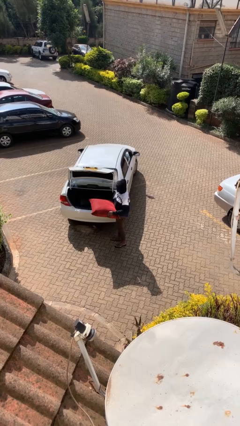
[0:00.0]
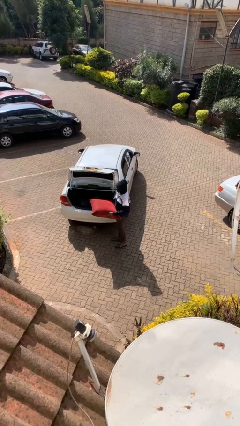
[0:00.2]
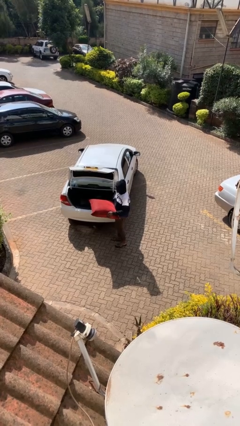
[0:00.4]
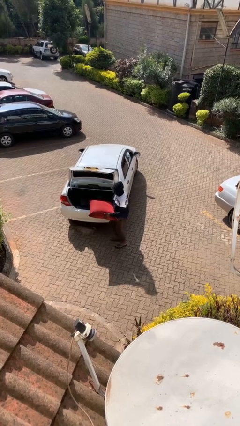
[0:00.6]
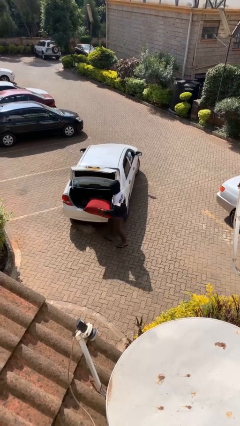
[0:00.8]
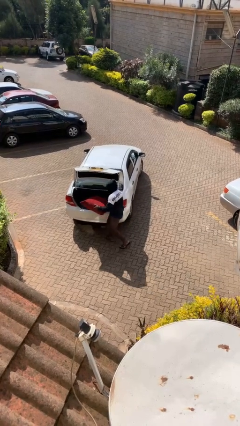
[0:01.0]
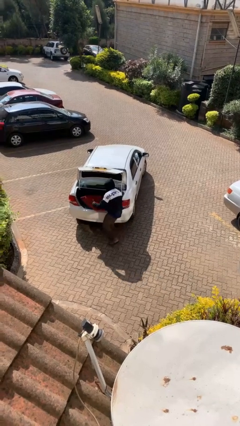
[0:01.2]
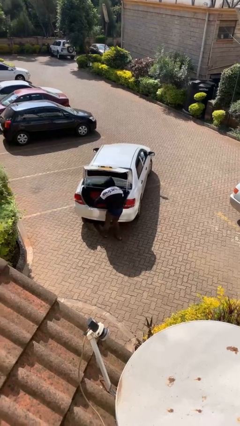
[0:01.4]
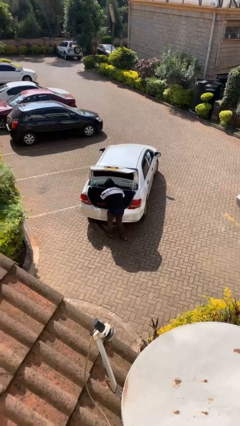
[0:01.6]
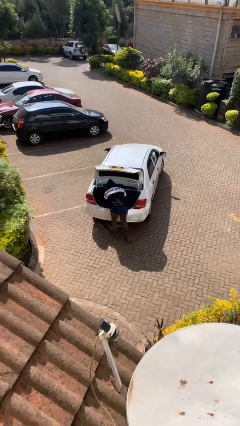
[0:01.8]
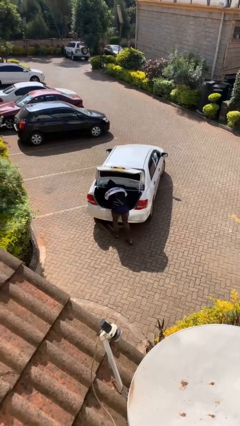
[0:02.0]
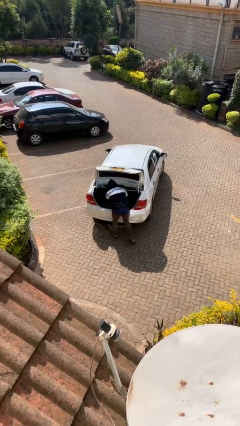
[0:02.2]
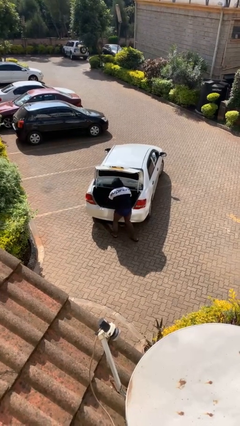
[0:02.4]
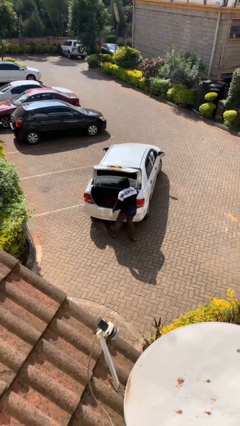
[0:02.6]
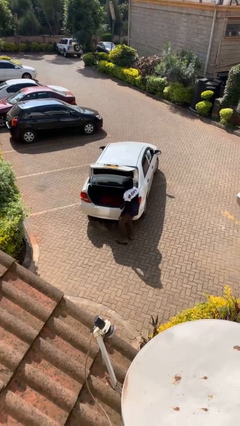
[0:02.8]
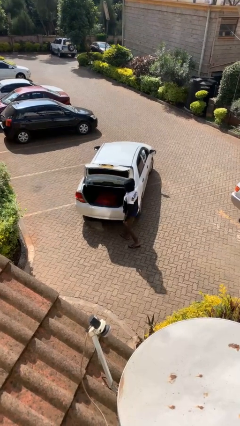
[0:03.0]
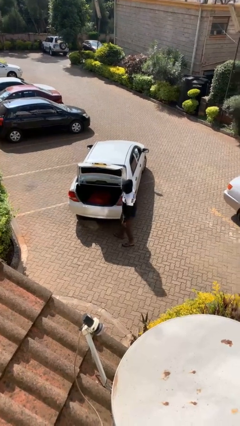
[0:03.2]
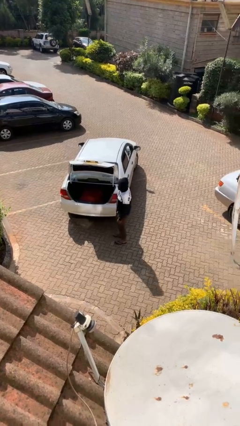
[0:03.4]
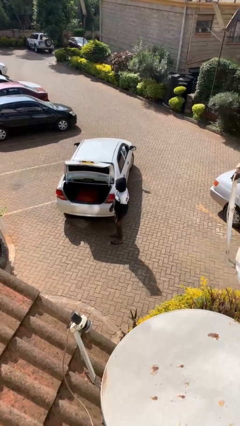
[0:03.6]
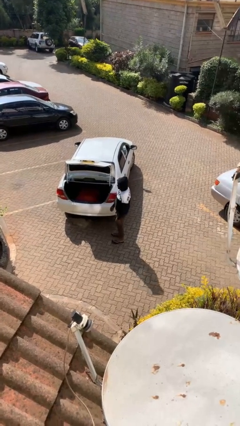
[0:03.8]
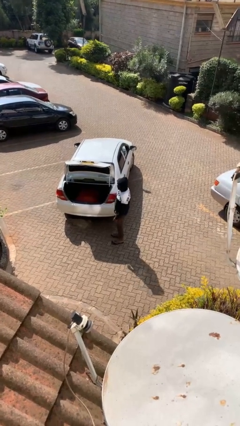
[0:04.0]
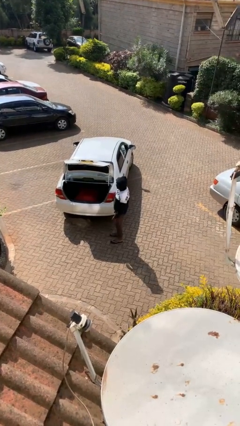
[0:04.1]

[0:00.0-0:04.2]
person loads car

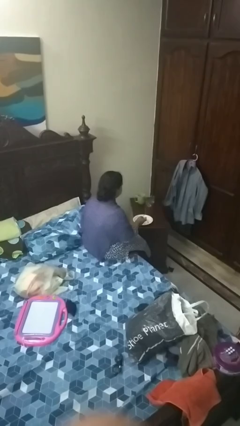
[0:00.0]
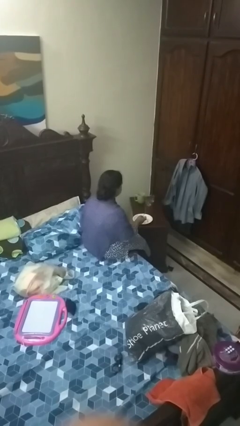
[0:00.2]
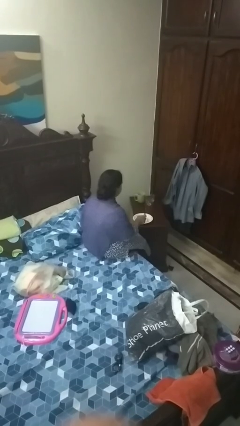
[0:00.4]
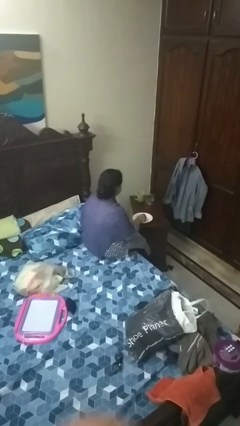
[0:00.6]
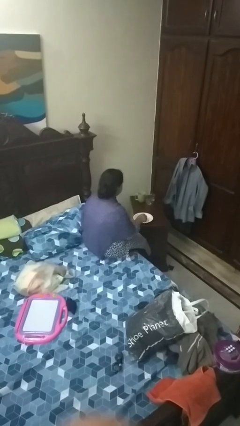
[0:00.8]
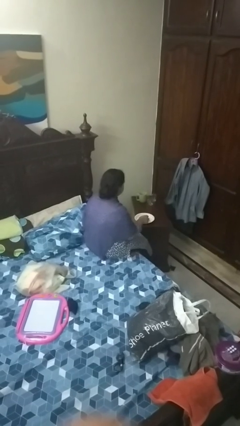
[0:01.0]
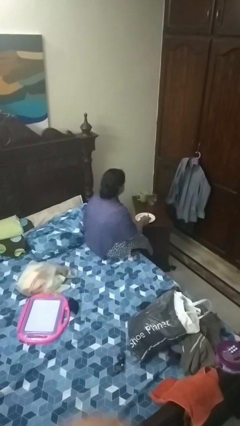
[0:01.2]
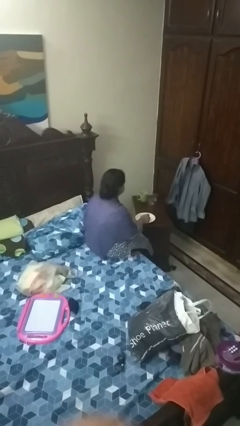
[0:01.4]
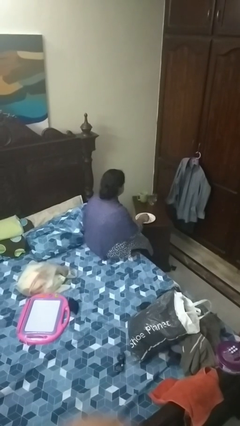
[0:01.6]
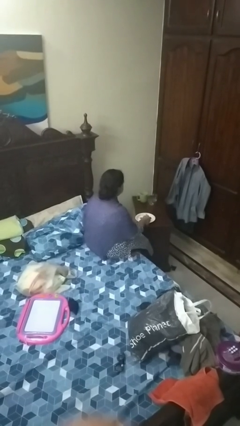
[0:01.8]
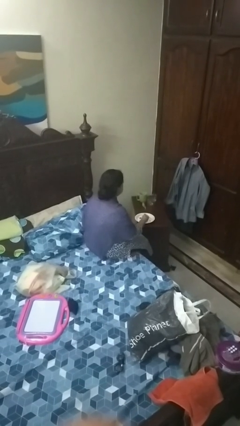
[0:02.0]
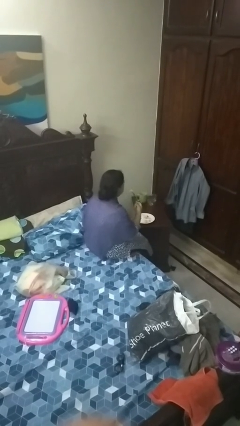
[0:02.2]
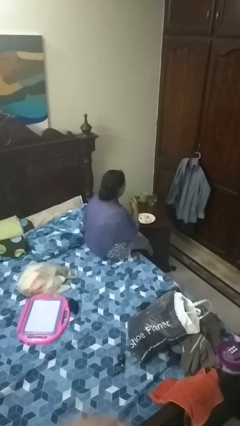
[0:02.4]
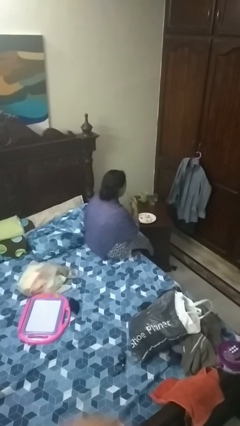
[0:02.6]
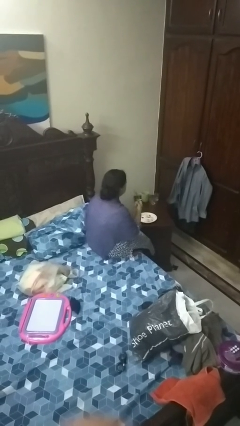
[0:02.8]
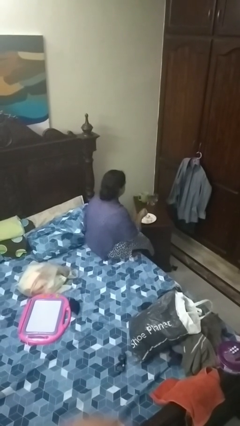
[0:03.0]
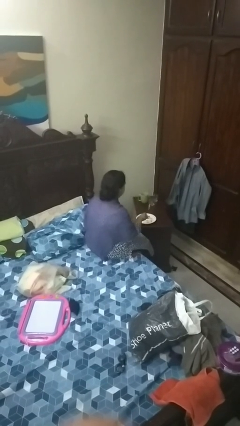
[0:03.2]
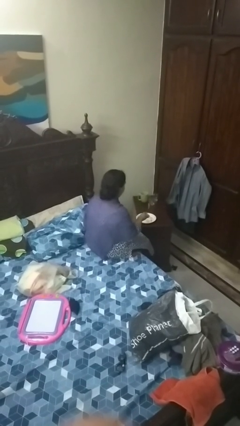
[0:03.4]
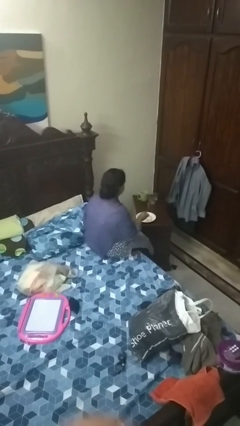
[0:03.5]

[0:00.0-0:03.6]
person eats with utensil

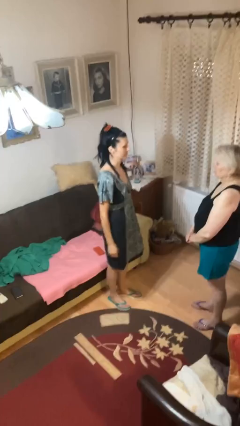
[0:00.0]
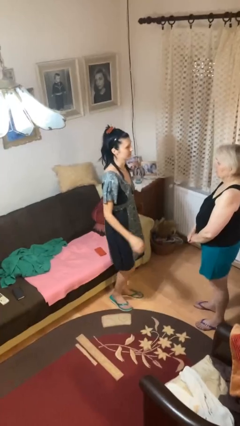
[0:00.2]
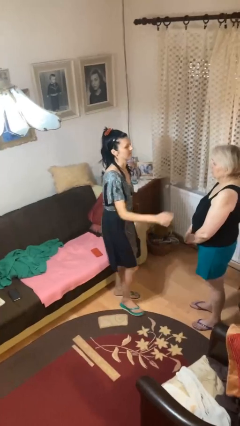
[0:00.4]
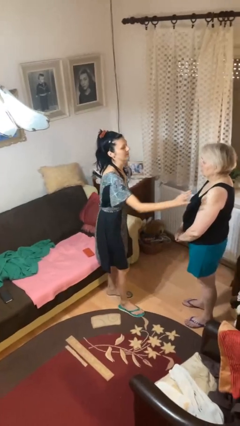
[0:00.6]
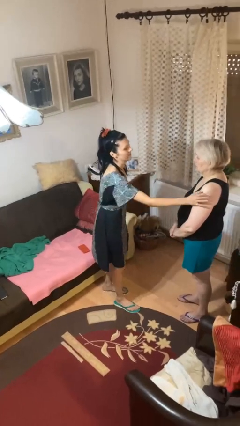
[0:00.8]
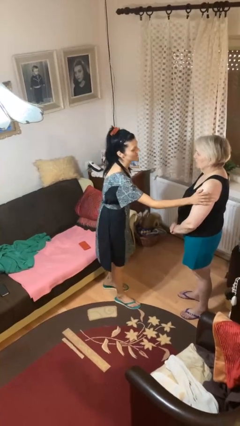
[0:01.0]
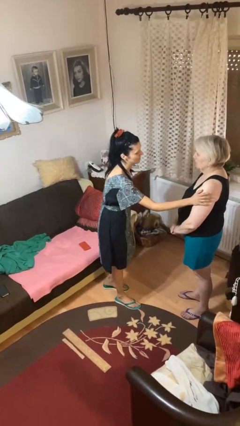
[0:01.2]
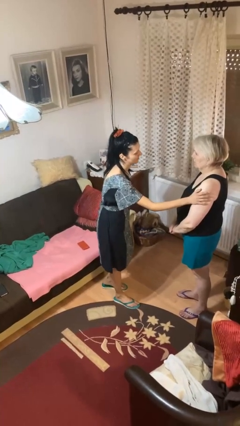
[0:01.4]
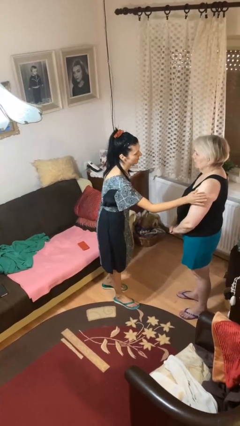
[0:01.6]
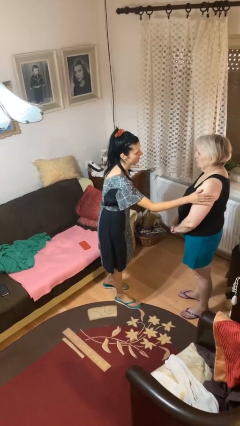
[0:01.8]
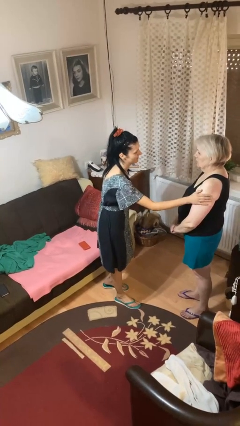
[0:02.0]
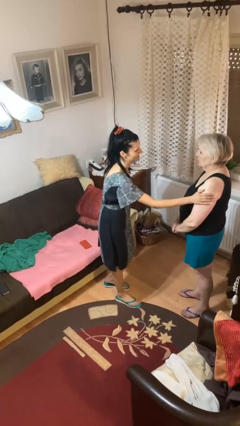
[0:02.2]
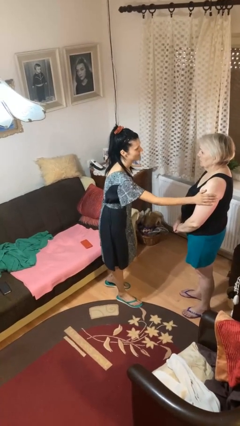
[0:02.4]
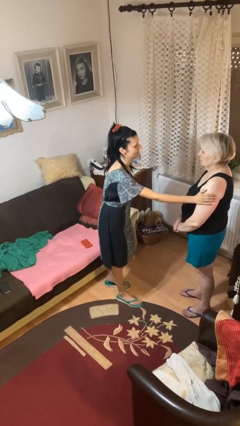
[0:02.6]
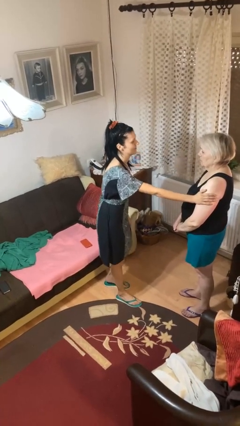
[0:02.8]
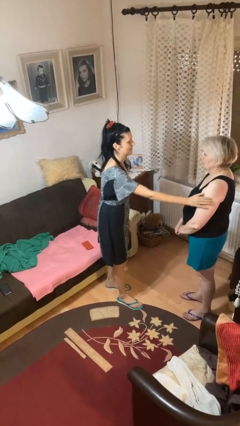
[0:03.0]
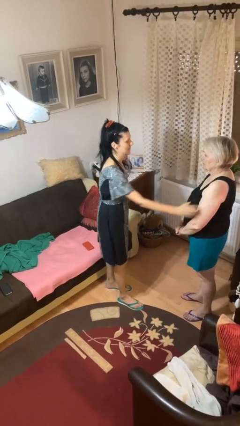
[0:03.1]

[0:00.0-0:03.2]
person pounds shoulders of person

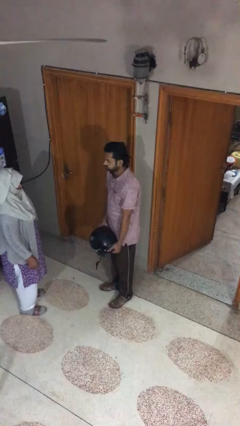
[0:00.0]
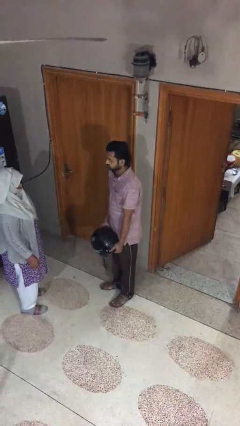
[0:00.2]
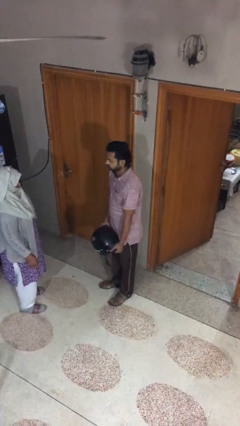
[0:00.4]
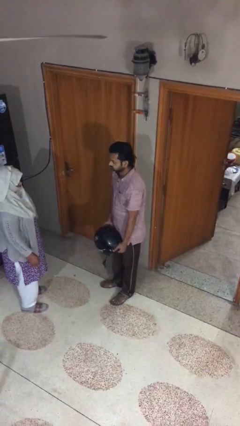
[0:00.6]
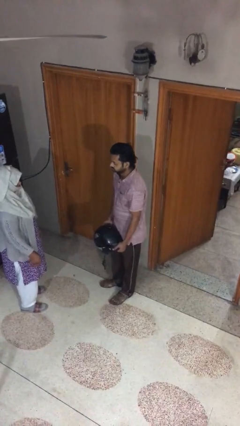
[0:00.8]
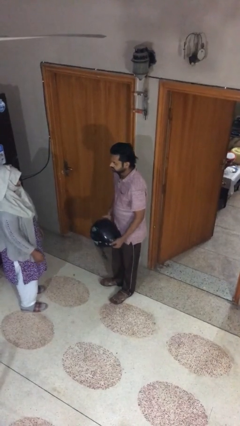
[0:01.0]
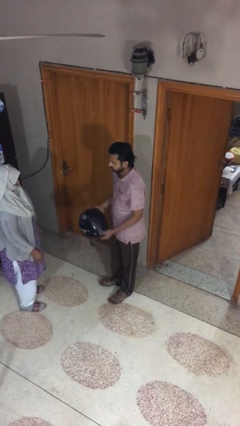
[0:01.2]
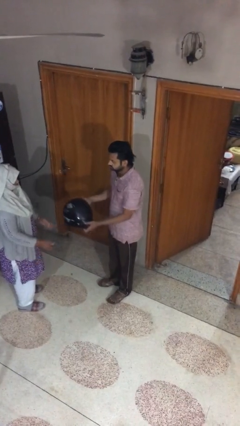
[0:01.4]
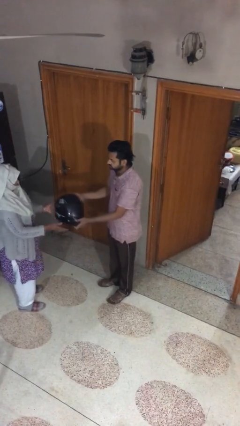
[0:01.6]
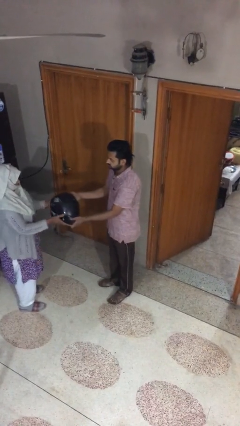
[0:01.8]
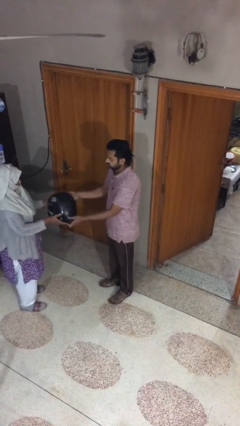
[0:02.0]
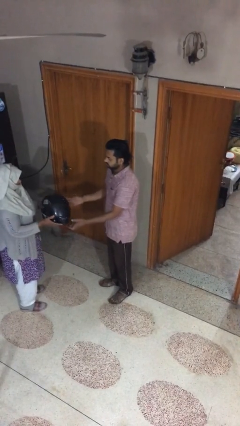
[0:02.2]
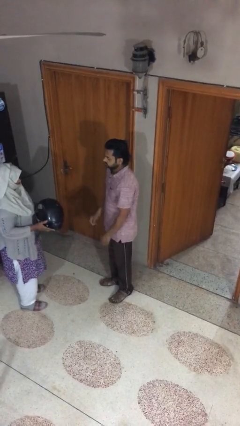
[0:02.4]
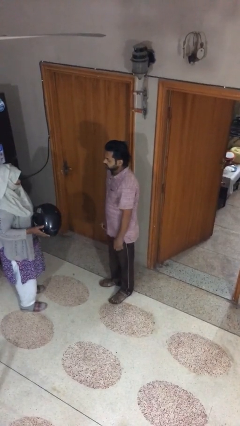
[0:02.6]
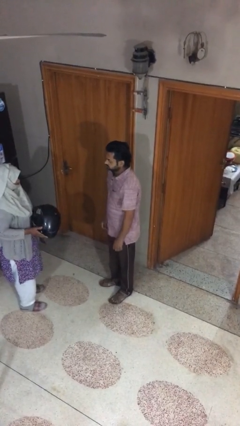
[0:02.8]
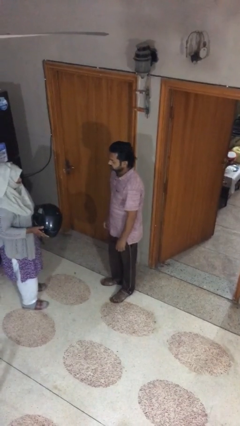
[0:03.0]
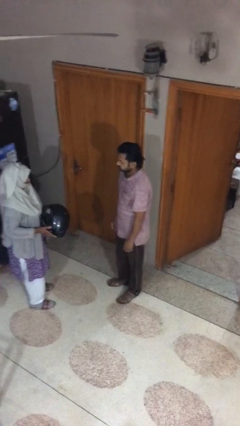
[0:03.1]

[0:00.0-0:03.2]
person transfers object to person

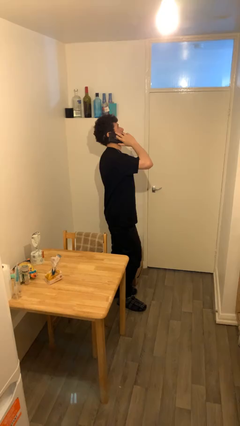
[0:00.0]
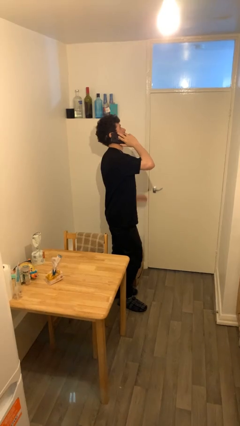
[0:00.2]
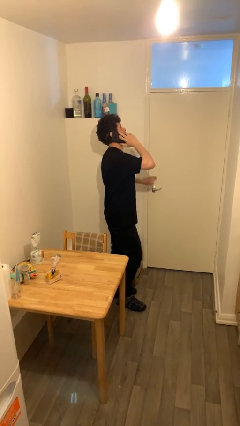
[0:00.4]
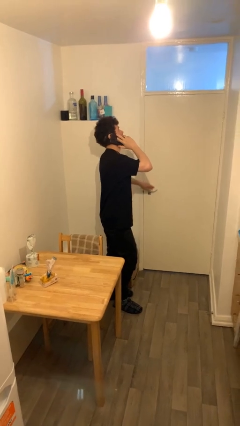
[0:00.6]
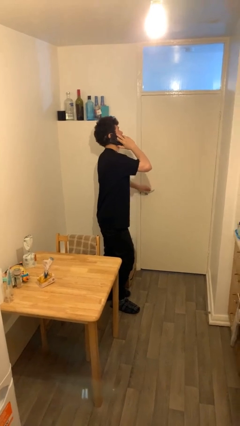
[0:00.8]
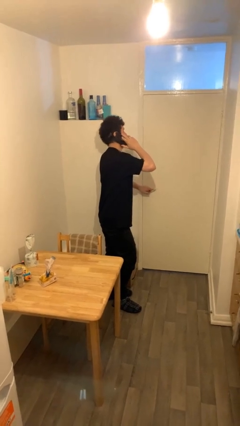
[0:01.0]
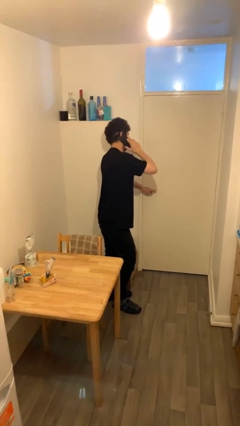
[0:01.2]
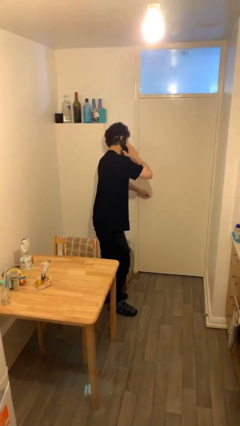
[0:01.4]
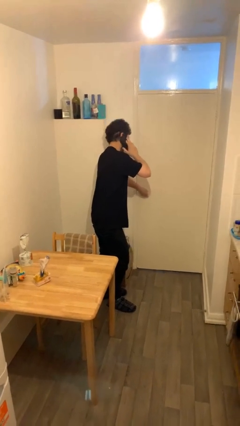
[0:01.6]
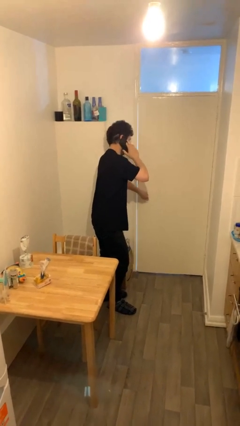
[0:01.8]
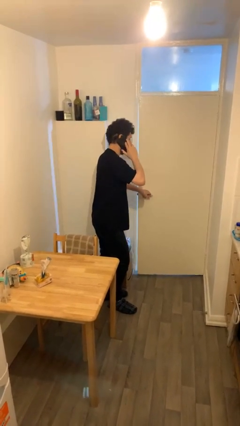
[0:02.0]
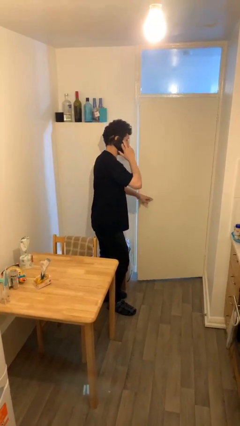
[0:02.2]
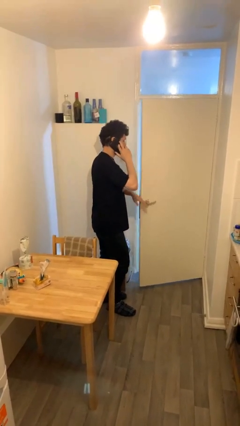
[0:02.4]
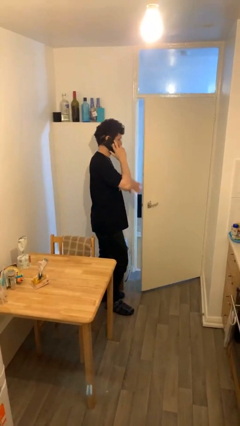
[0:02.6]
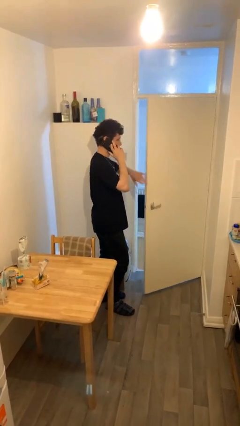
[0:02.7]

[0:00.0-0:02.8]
person opens facility door

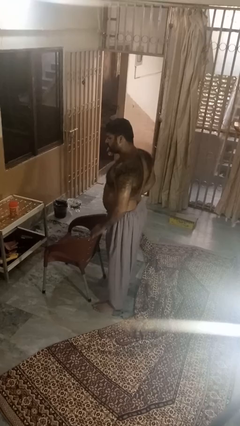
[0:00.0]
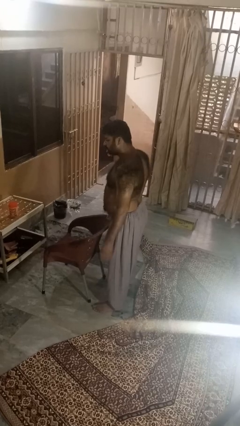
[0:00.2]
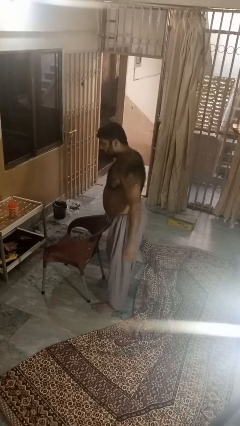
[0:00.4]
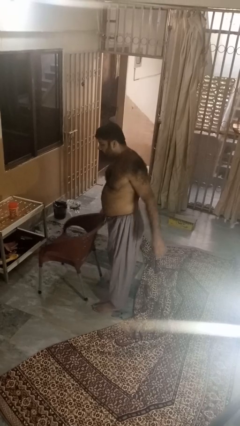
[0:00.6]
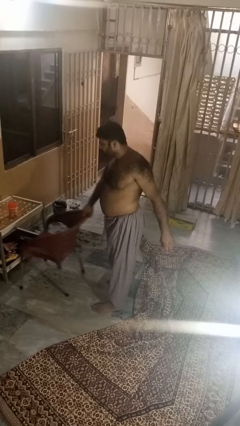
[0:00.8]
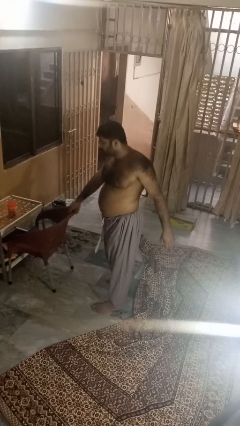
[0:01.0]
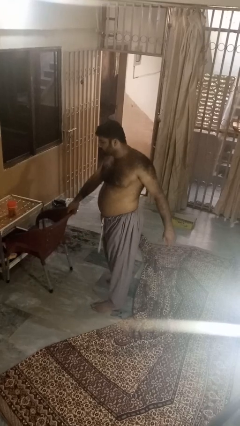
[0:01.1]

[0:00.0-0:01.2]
person pushes in chair
